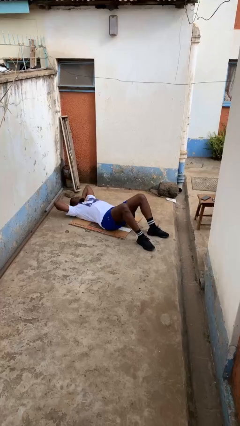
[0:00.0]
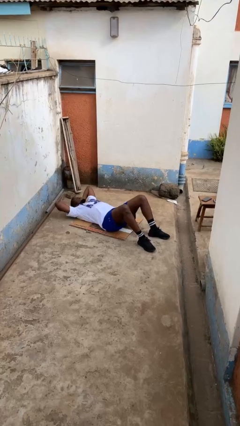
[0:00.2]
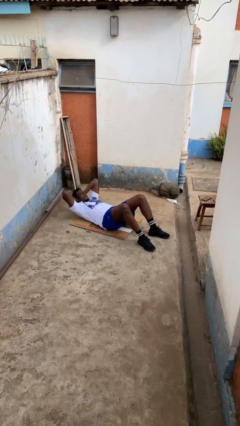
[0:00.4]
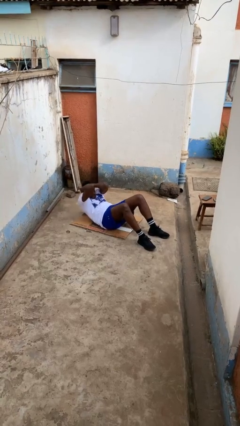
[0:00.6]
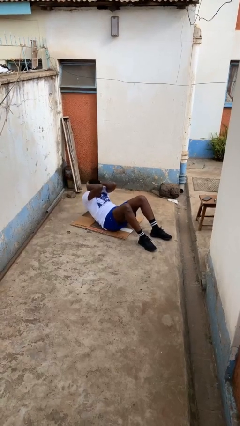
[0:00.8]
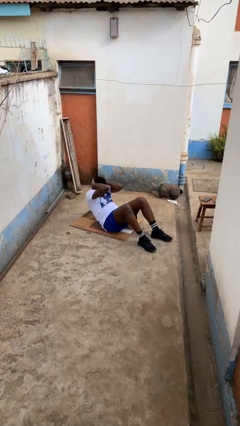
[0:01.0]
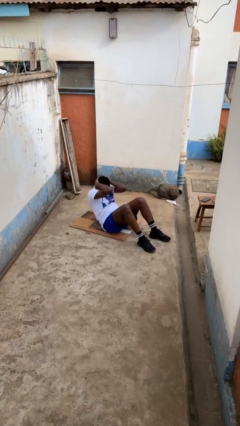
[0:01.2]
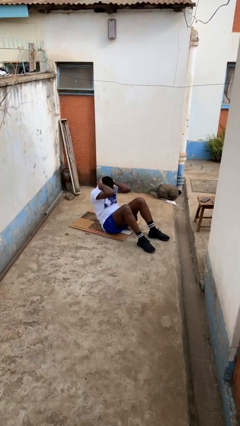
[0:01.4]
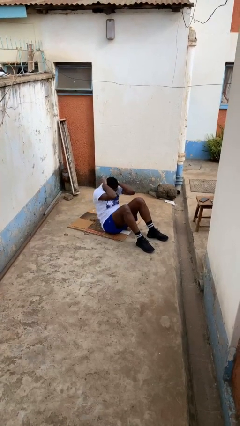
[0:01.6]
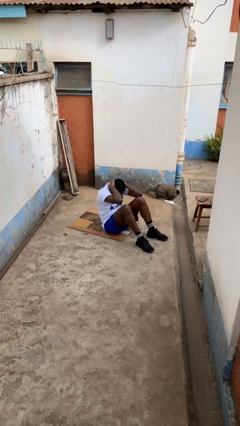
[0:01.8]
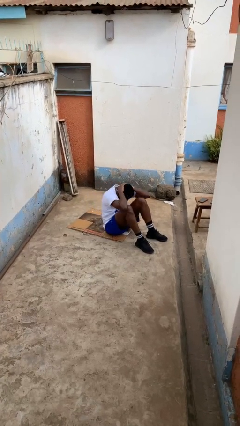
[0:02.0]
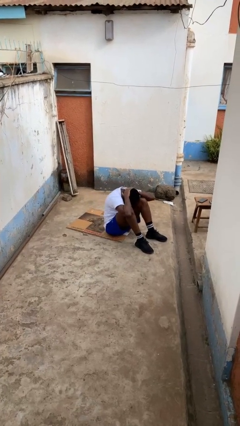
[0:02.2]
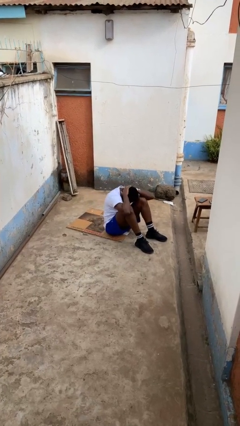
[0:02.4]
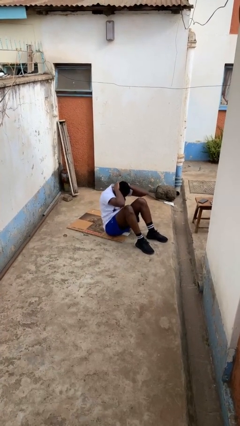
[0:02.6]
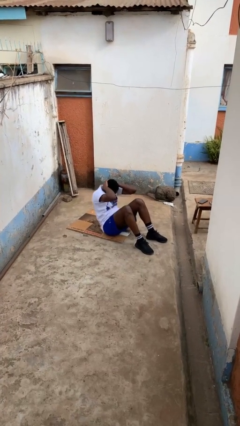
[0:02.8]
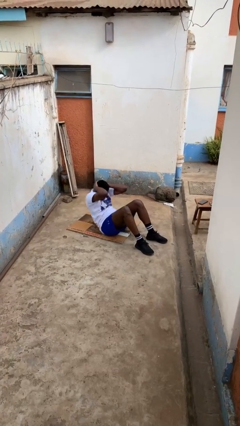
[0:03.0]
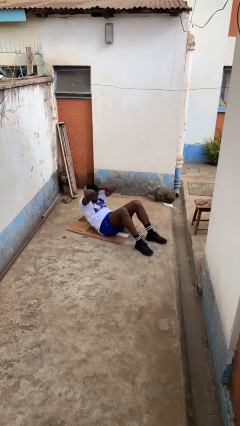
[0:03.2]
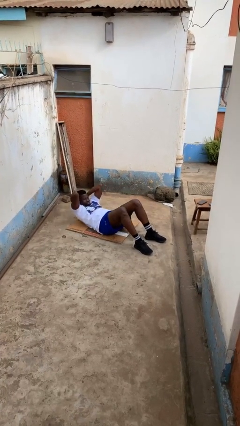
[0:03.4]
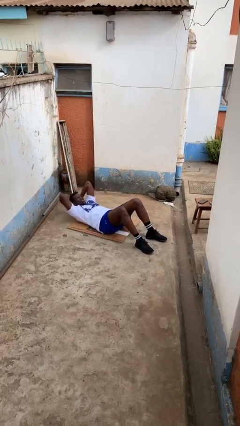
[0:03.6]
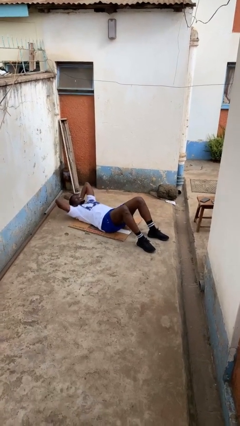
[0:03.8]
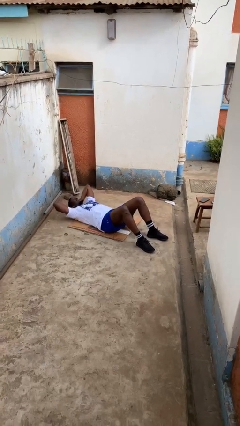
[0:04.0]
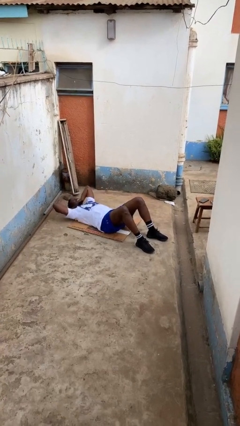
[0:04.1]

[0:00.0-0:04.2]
person exercises with situp

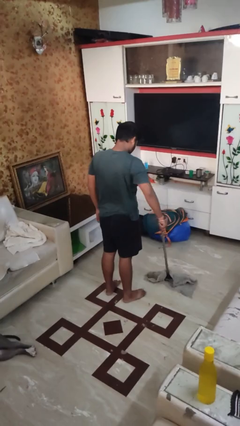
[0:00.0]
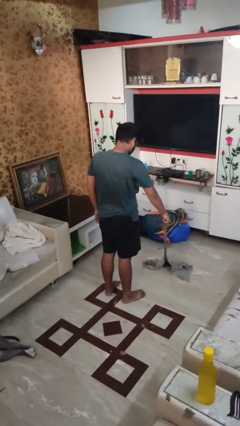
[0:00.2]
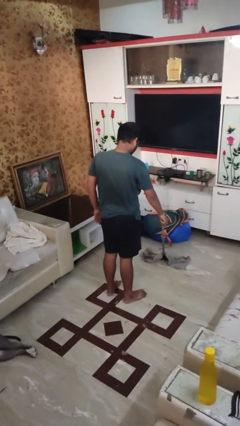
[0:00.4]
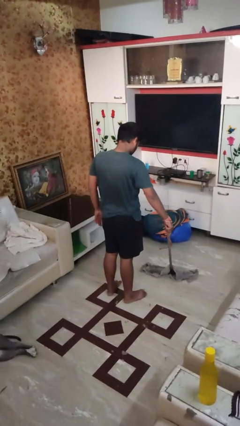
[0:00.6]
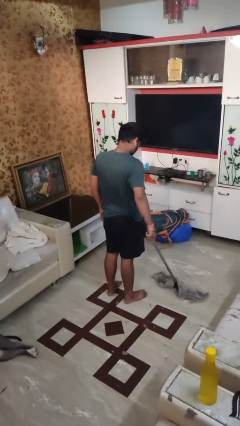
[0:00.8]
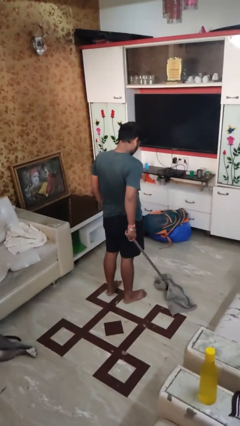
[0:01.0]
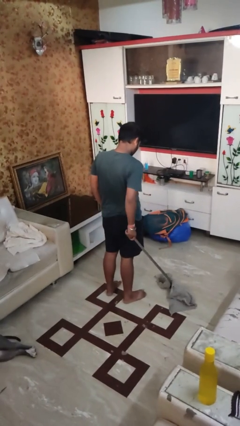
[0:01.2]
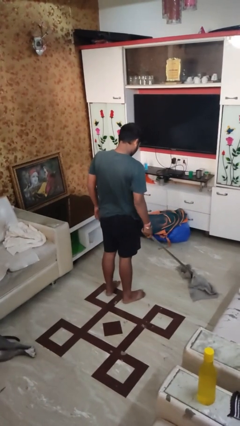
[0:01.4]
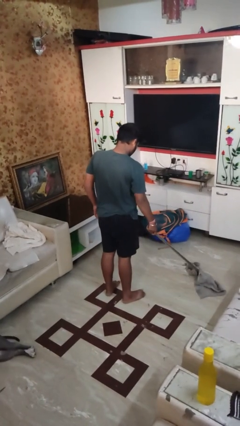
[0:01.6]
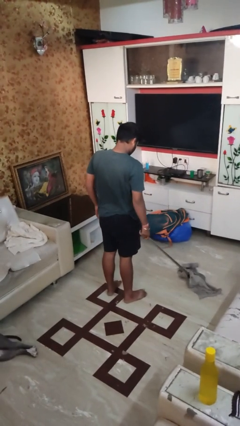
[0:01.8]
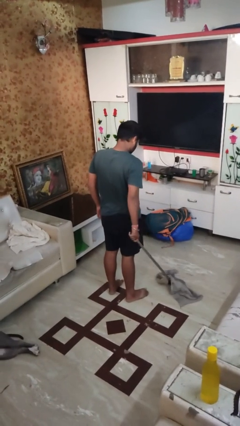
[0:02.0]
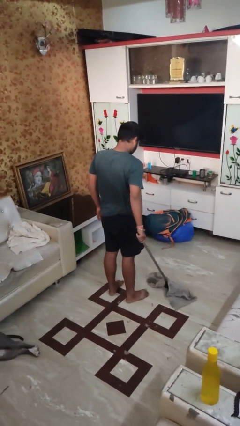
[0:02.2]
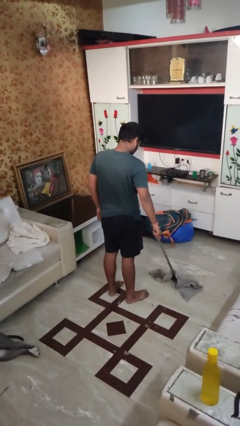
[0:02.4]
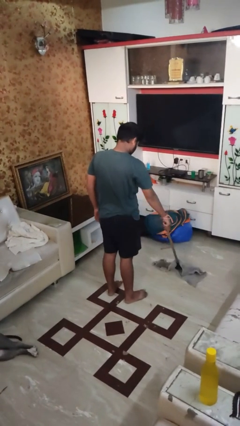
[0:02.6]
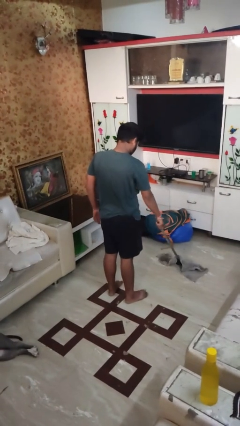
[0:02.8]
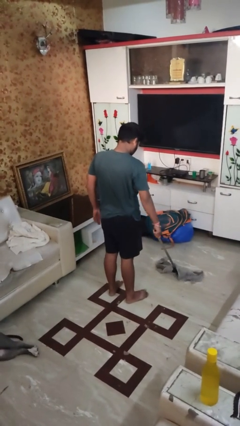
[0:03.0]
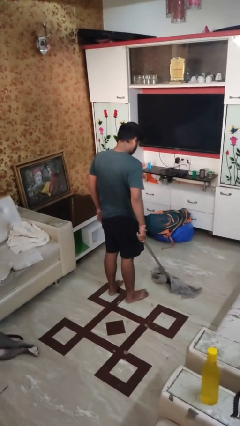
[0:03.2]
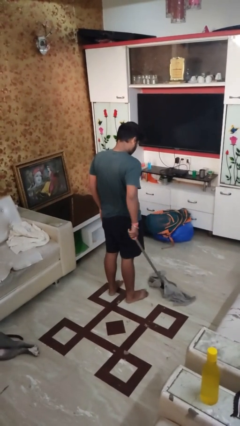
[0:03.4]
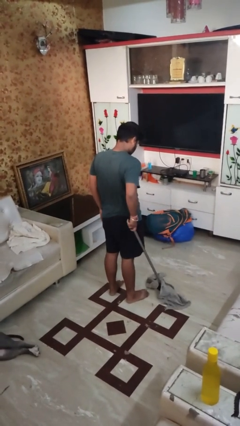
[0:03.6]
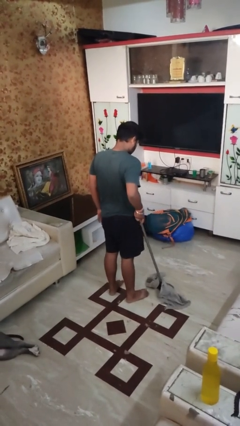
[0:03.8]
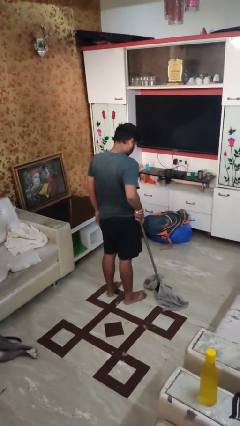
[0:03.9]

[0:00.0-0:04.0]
person mops

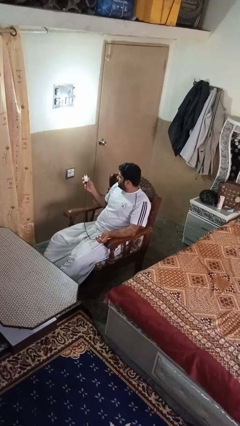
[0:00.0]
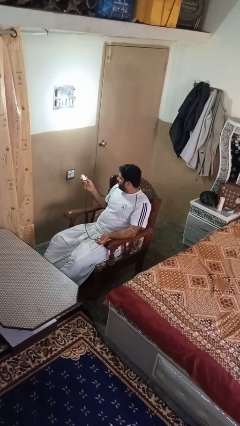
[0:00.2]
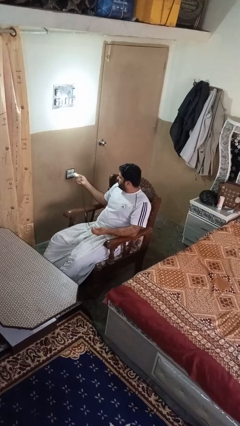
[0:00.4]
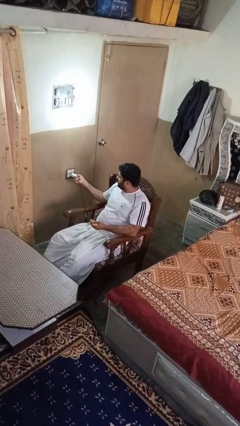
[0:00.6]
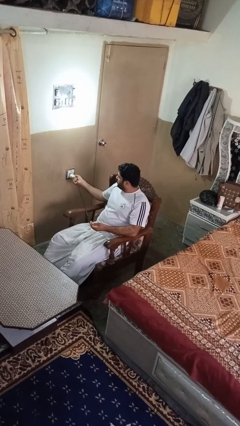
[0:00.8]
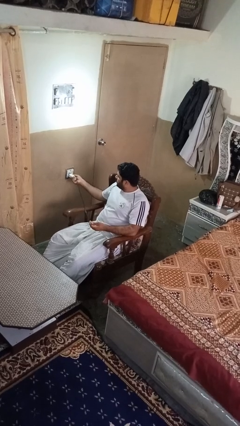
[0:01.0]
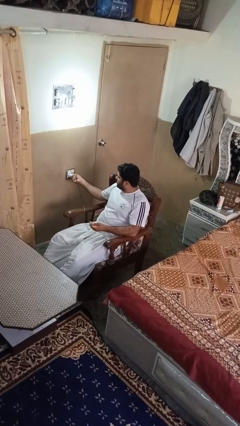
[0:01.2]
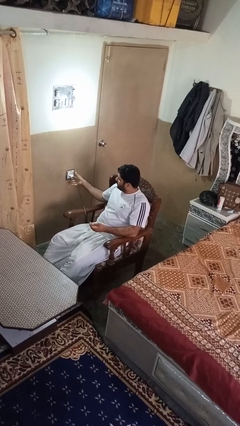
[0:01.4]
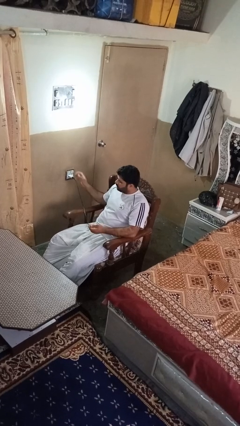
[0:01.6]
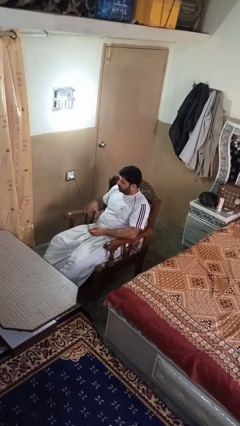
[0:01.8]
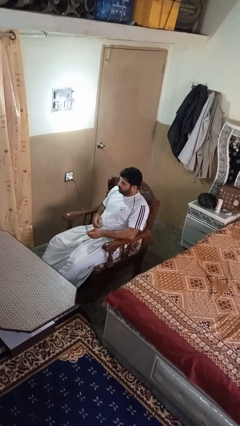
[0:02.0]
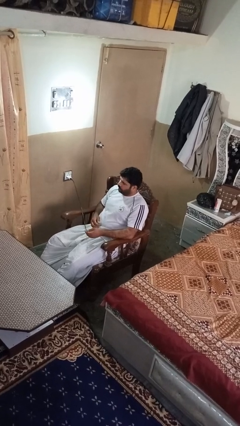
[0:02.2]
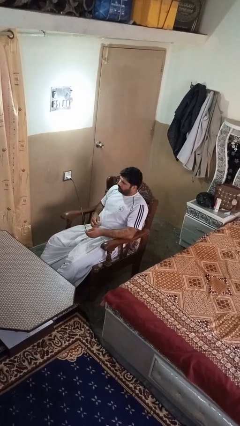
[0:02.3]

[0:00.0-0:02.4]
person plugs into electrical socket

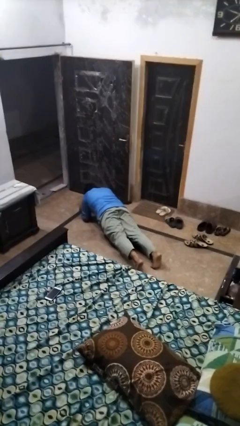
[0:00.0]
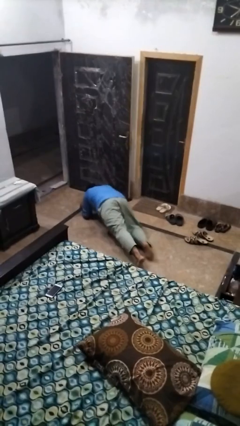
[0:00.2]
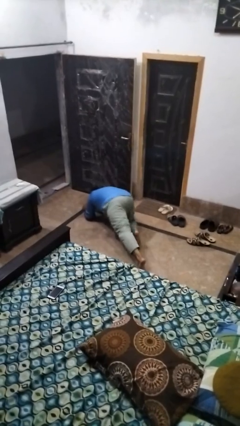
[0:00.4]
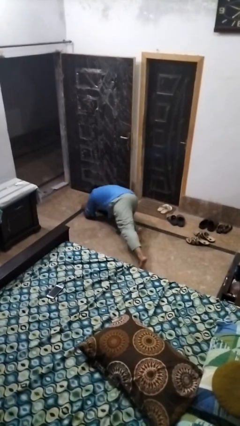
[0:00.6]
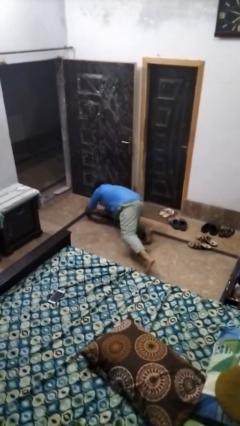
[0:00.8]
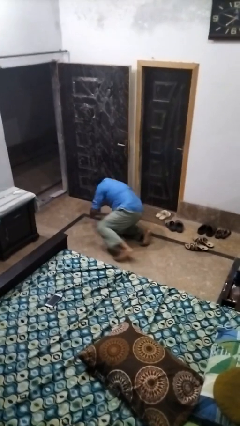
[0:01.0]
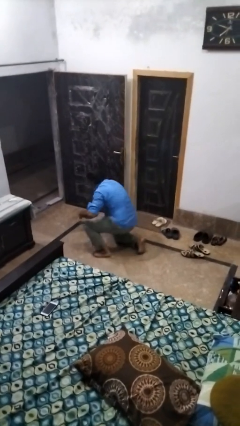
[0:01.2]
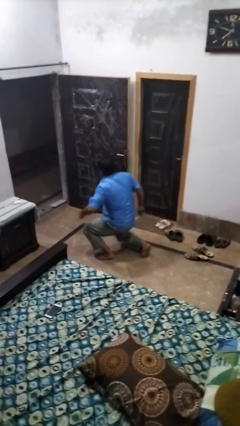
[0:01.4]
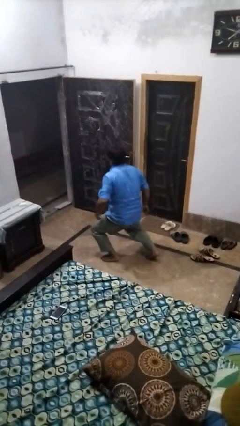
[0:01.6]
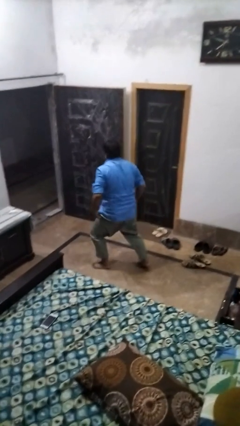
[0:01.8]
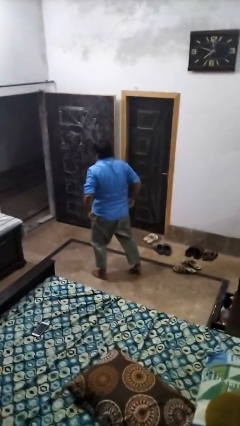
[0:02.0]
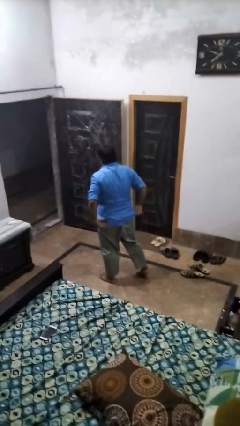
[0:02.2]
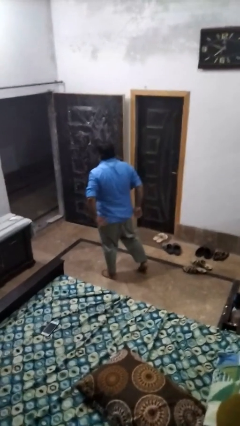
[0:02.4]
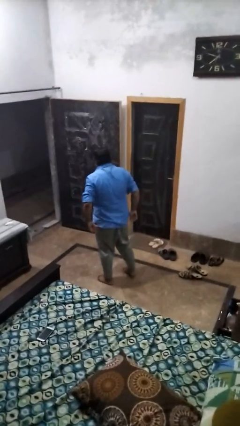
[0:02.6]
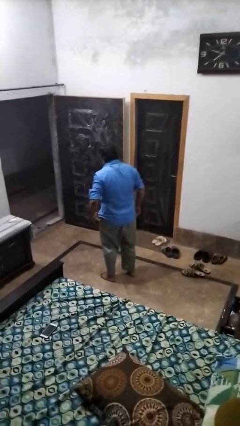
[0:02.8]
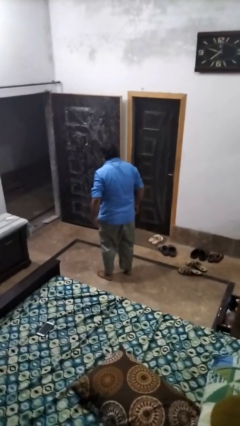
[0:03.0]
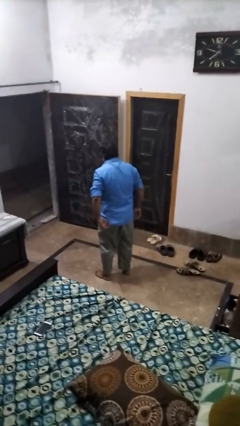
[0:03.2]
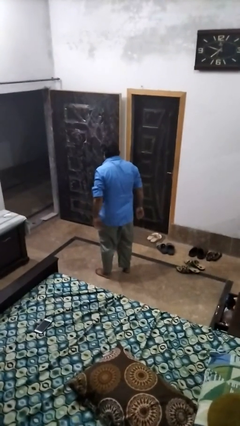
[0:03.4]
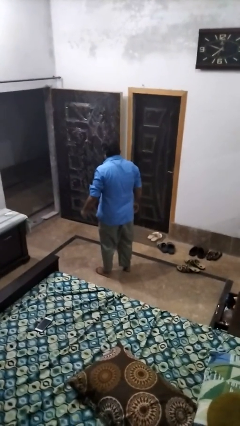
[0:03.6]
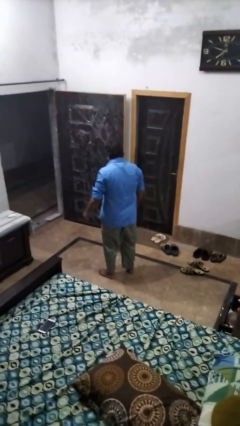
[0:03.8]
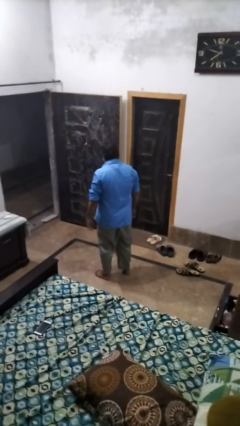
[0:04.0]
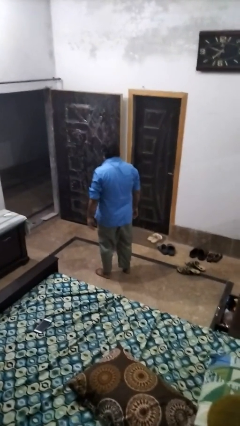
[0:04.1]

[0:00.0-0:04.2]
person stands up from floor

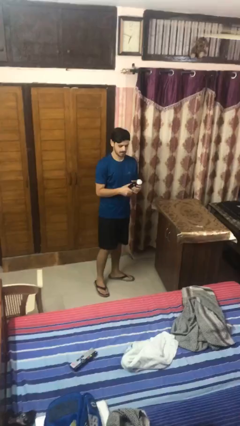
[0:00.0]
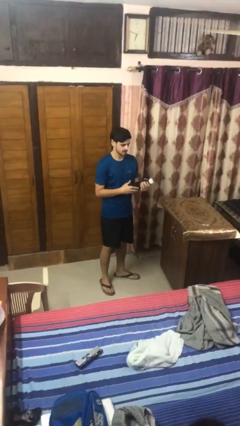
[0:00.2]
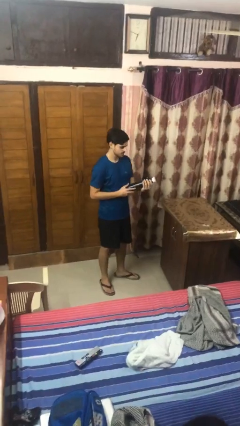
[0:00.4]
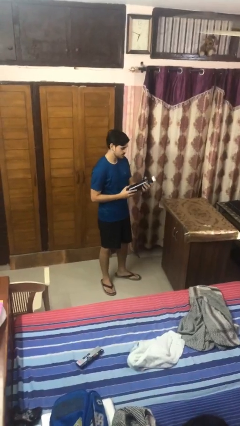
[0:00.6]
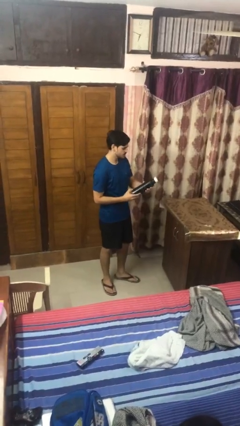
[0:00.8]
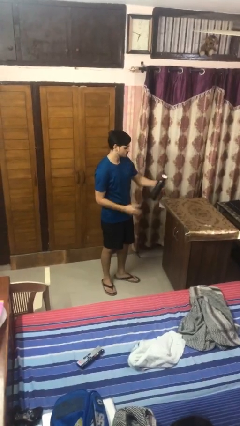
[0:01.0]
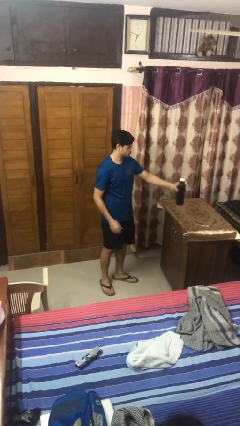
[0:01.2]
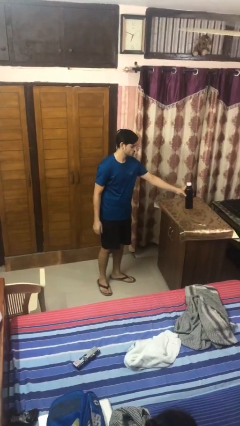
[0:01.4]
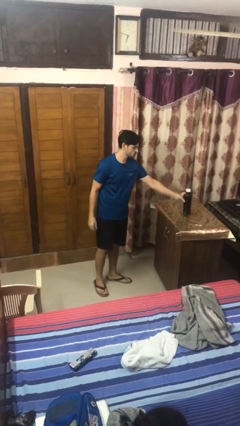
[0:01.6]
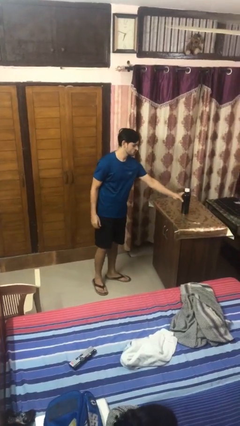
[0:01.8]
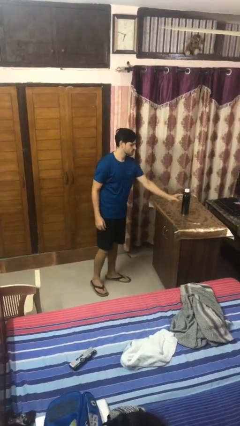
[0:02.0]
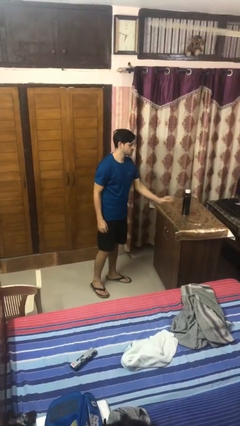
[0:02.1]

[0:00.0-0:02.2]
person puts down object on countertop

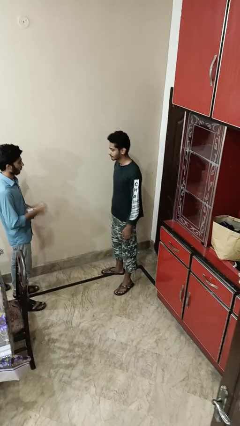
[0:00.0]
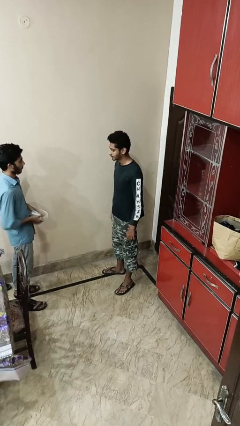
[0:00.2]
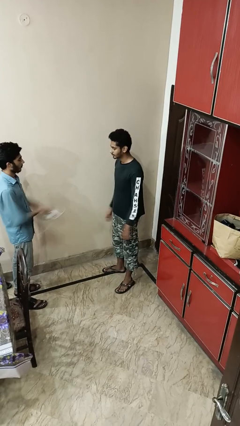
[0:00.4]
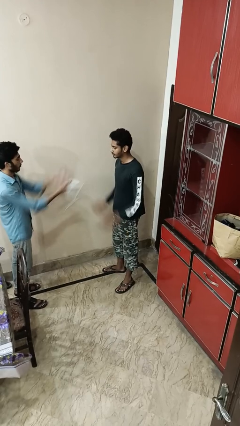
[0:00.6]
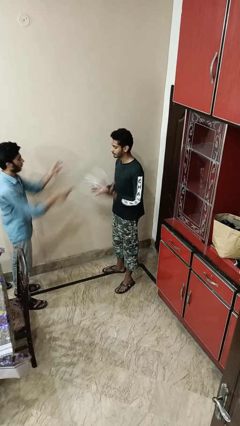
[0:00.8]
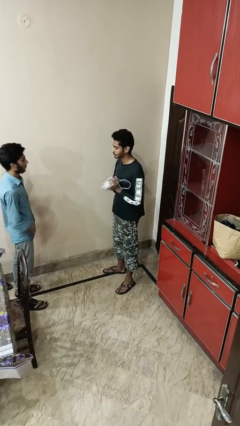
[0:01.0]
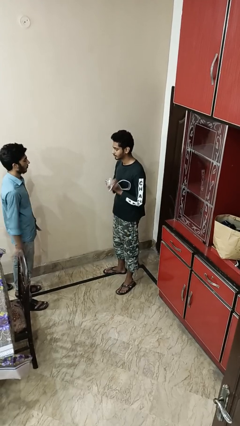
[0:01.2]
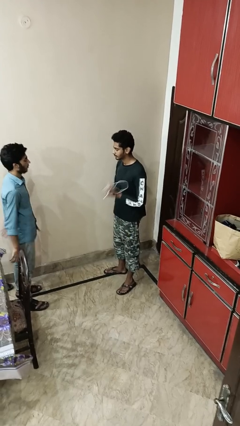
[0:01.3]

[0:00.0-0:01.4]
person catches object from person
